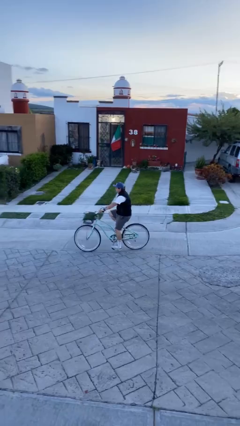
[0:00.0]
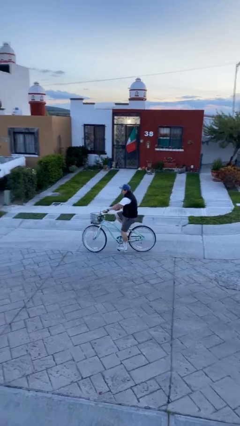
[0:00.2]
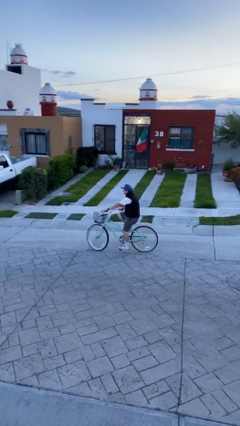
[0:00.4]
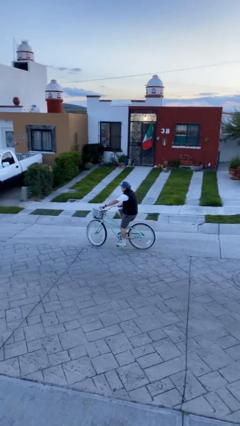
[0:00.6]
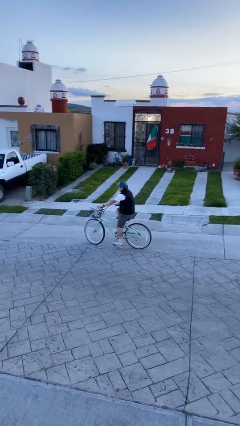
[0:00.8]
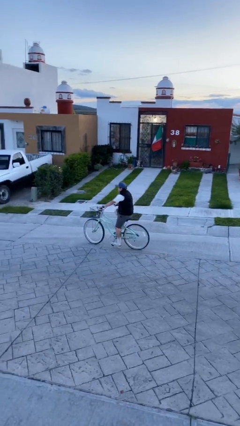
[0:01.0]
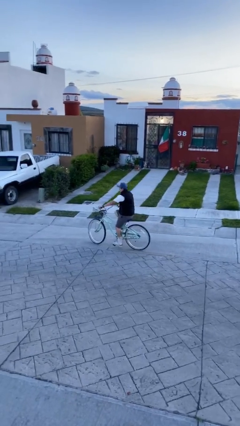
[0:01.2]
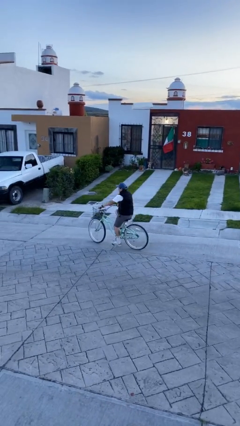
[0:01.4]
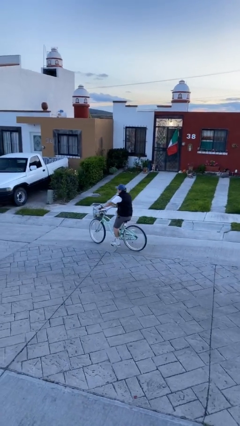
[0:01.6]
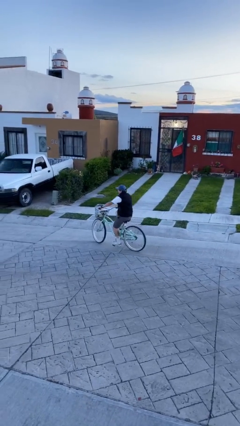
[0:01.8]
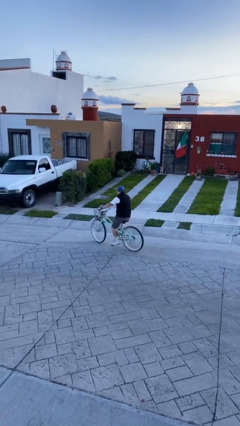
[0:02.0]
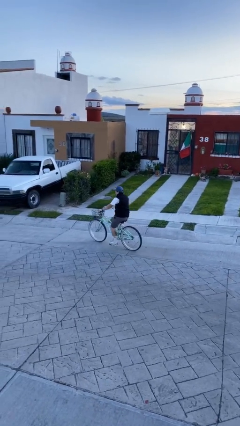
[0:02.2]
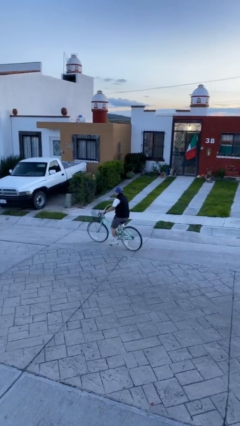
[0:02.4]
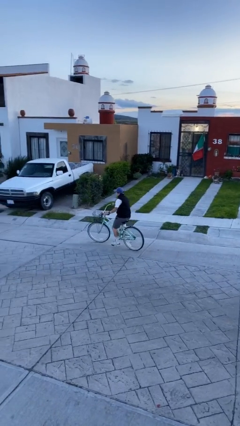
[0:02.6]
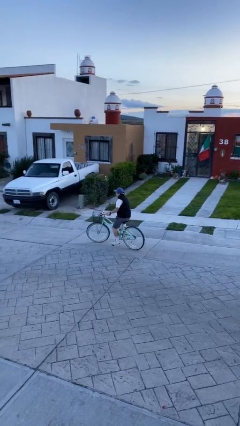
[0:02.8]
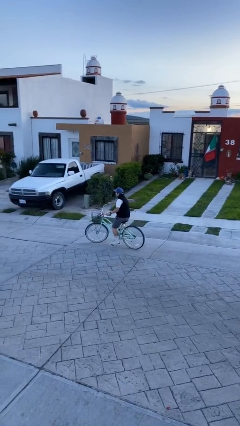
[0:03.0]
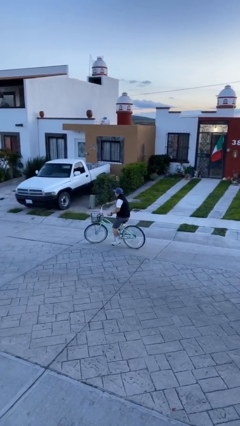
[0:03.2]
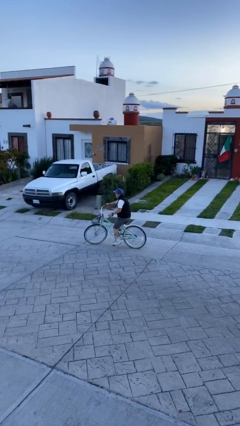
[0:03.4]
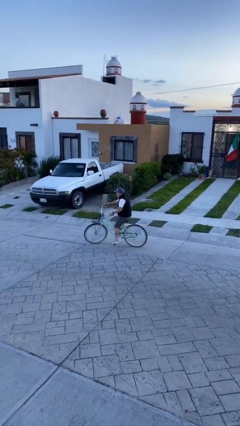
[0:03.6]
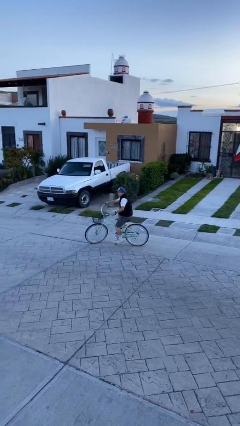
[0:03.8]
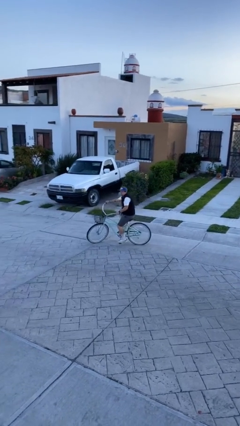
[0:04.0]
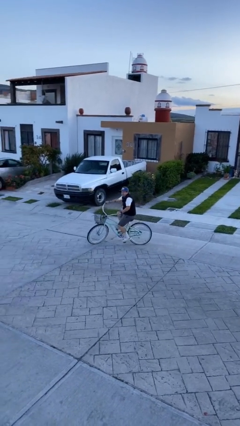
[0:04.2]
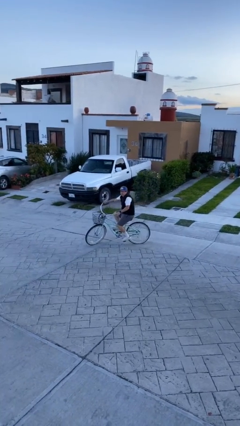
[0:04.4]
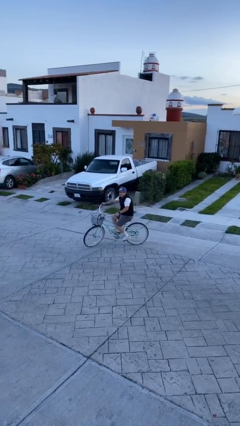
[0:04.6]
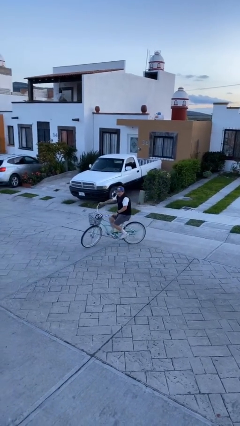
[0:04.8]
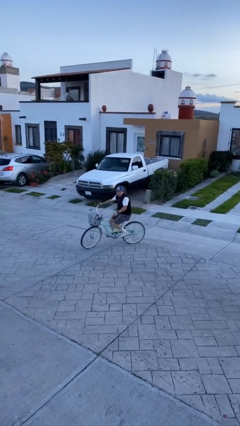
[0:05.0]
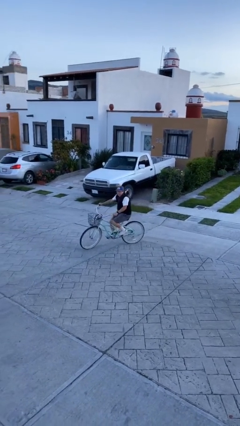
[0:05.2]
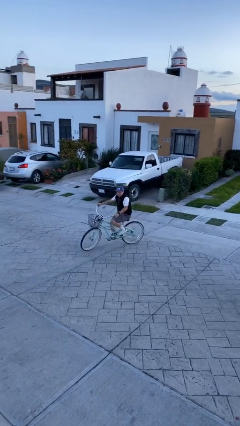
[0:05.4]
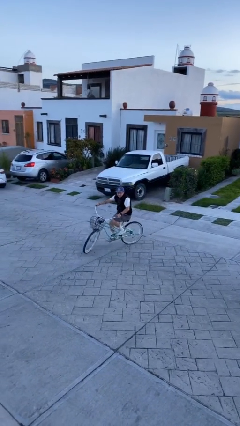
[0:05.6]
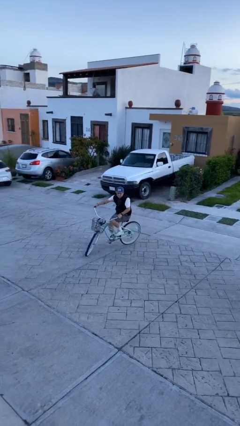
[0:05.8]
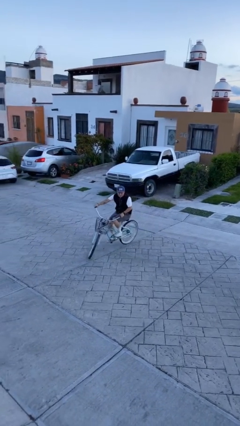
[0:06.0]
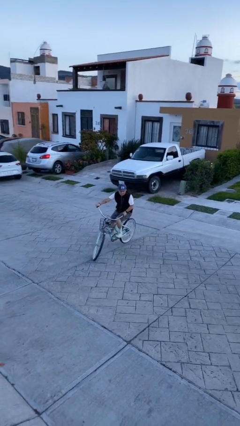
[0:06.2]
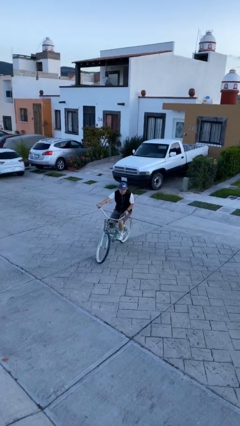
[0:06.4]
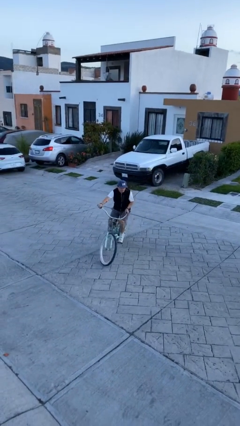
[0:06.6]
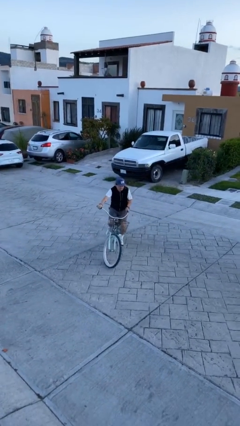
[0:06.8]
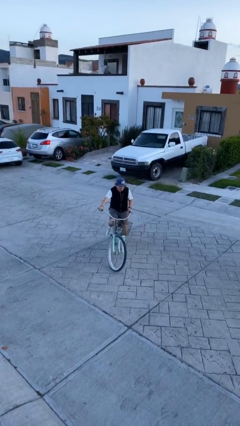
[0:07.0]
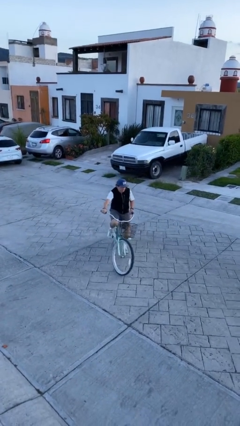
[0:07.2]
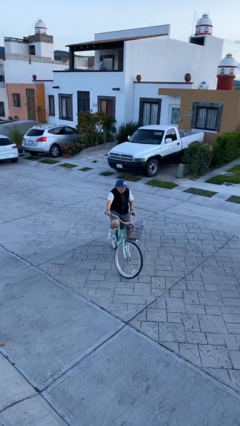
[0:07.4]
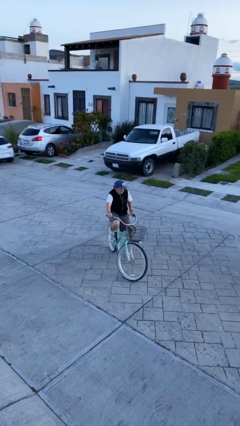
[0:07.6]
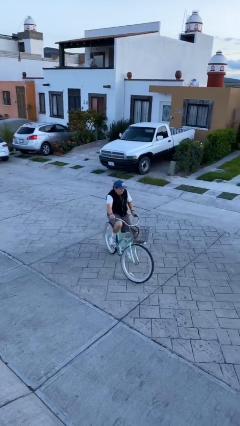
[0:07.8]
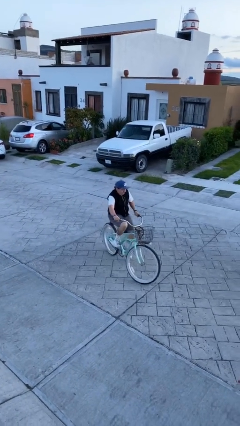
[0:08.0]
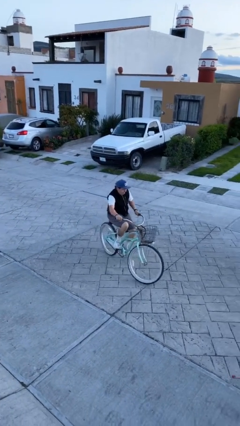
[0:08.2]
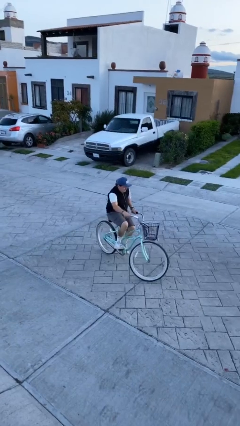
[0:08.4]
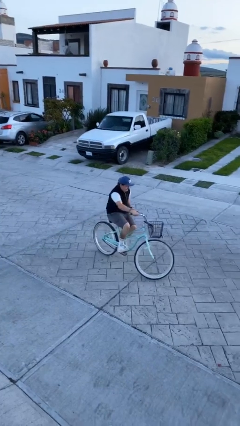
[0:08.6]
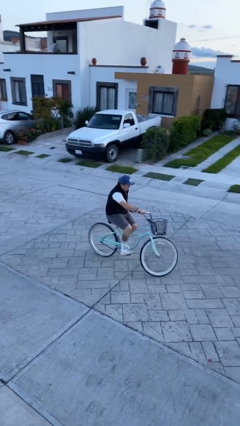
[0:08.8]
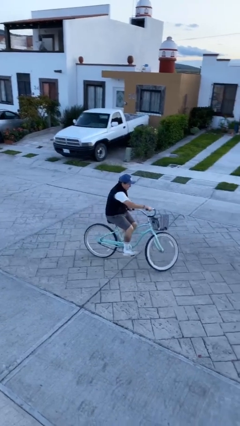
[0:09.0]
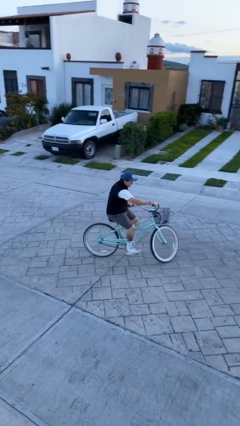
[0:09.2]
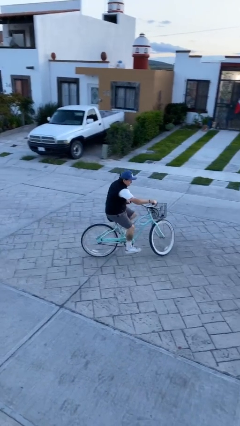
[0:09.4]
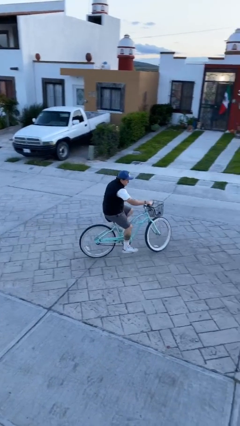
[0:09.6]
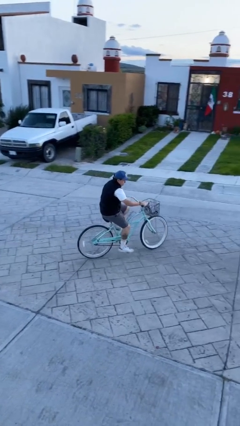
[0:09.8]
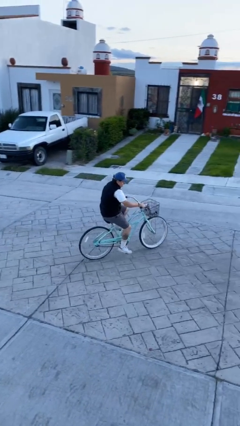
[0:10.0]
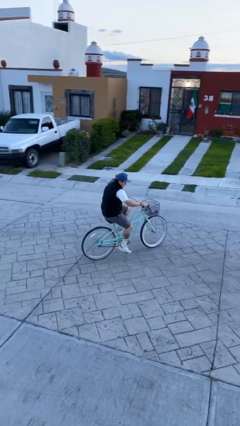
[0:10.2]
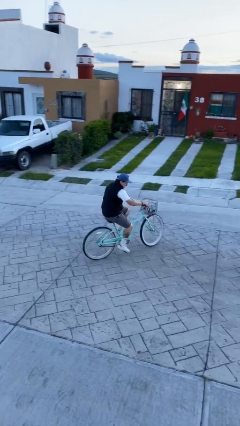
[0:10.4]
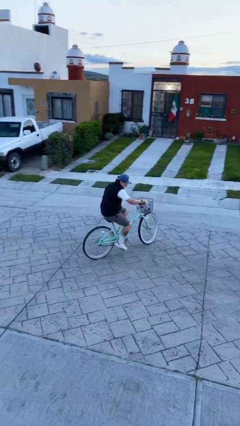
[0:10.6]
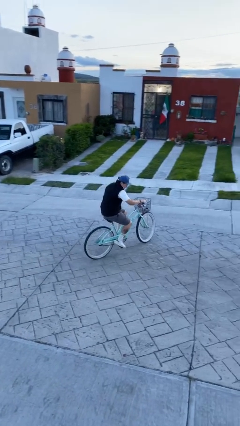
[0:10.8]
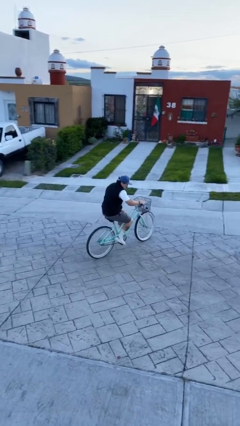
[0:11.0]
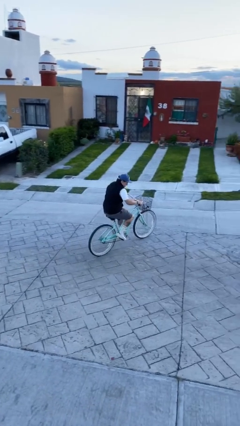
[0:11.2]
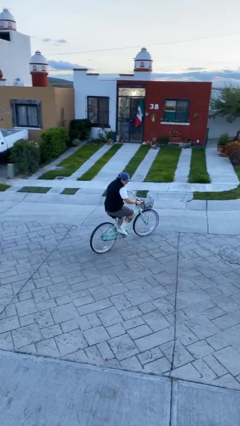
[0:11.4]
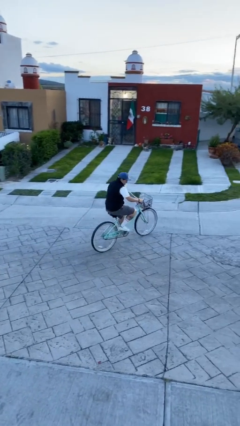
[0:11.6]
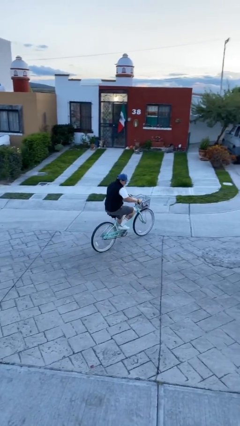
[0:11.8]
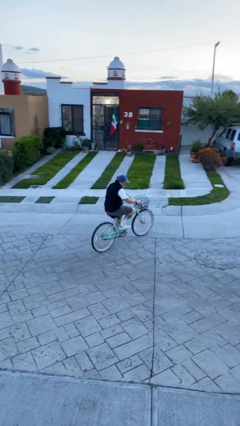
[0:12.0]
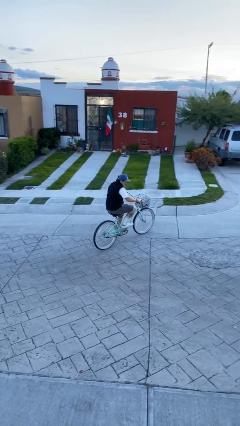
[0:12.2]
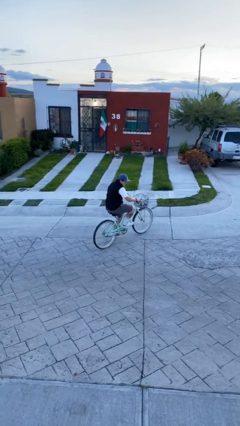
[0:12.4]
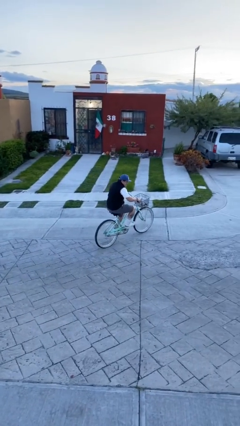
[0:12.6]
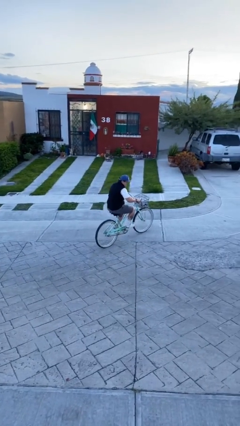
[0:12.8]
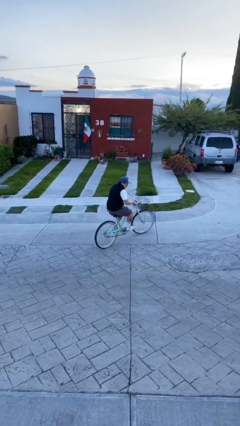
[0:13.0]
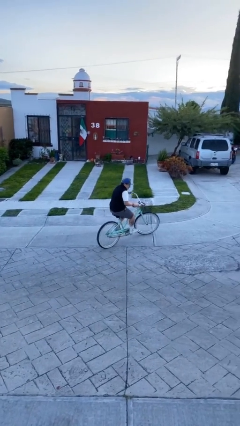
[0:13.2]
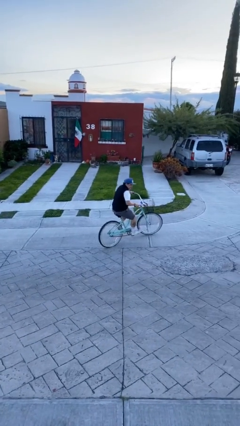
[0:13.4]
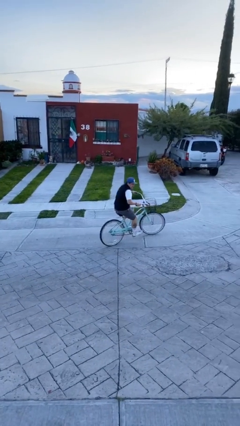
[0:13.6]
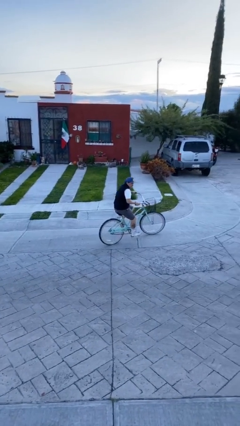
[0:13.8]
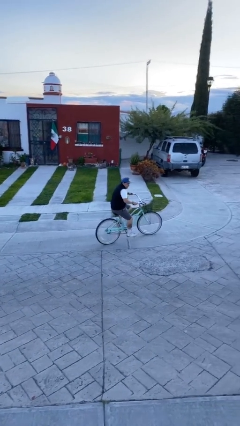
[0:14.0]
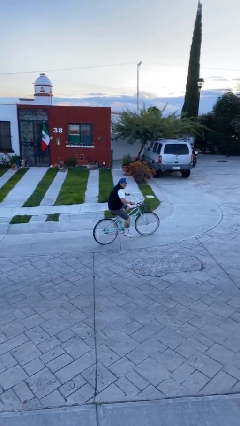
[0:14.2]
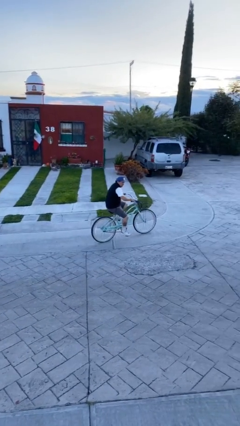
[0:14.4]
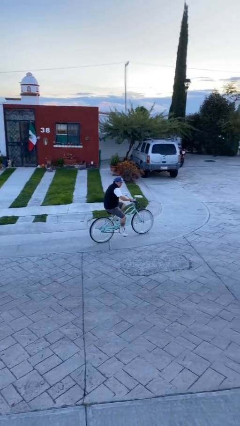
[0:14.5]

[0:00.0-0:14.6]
person rides bicycle

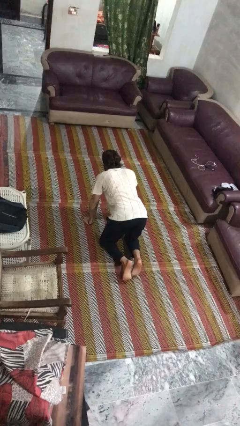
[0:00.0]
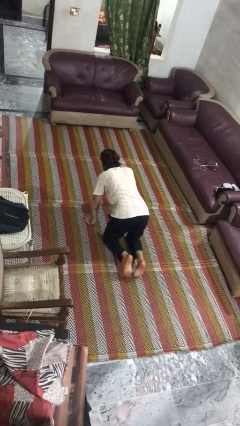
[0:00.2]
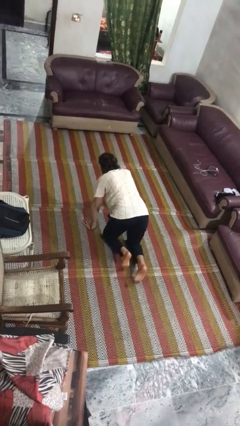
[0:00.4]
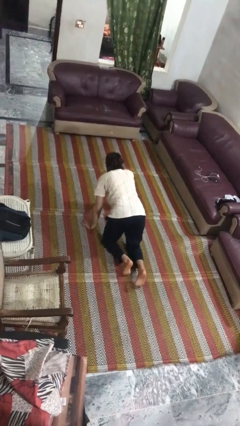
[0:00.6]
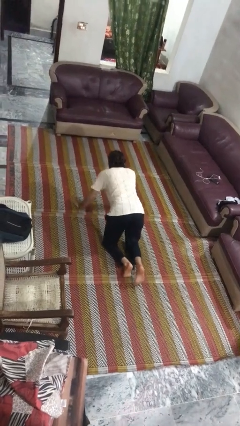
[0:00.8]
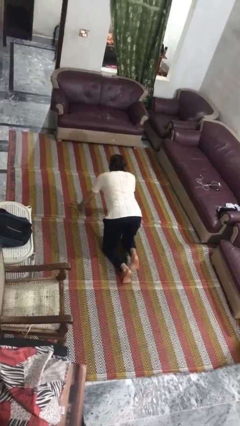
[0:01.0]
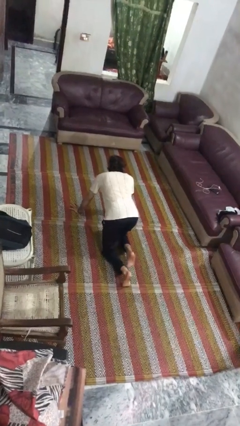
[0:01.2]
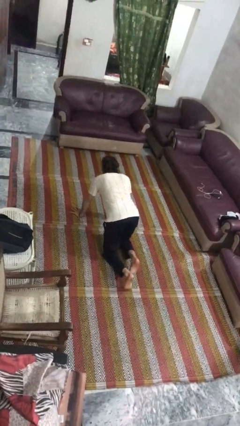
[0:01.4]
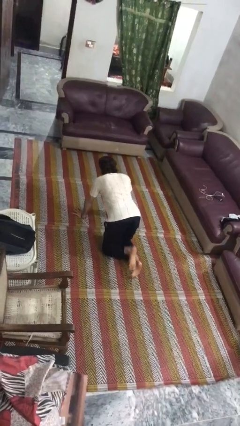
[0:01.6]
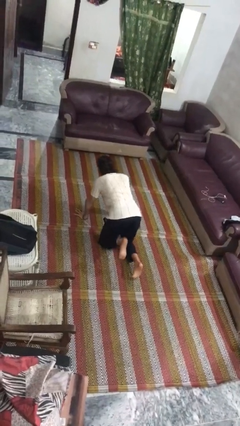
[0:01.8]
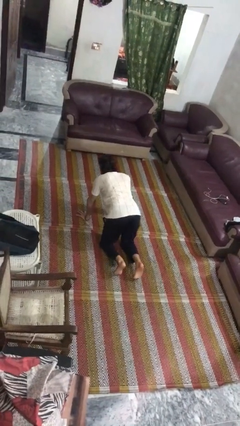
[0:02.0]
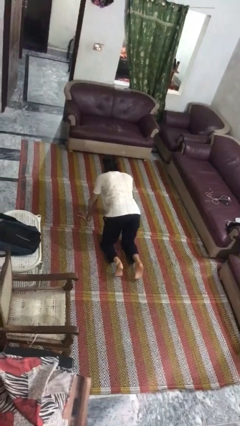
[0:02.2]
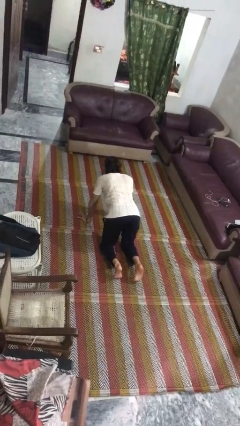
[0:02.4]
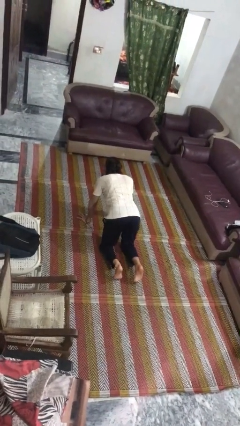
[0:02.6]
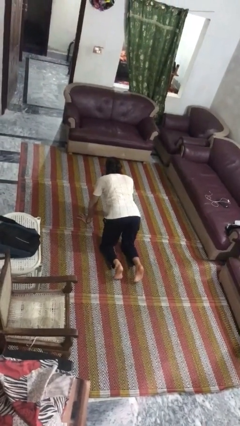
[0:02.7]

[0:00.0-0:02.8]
person crawls

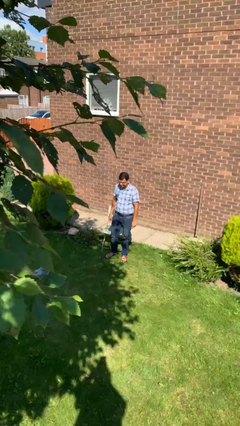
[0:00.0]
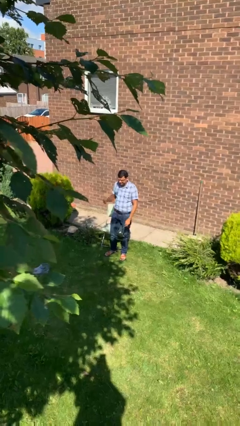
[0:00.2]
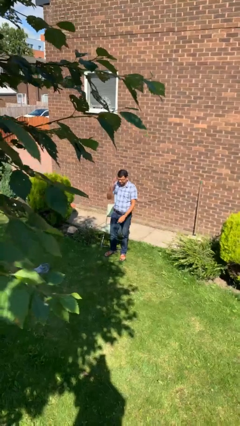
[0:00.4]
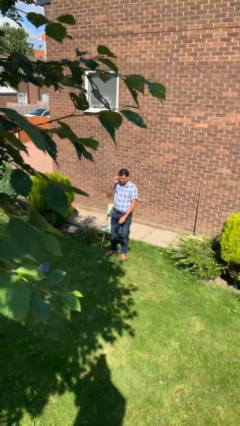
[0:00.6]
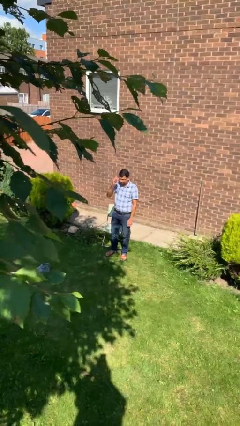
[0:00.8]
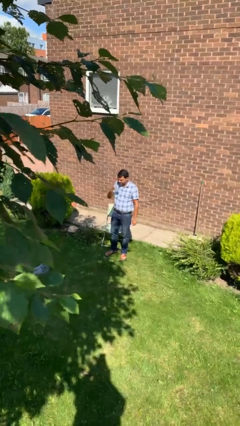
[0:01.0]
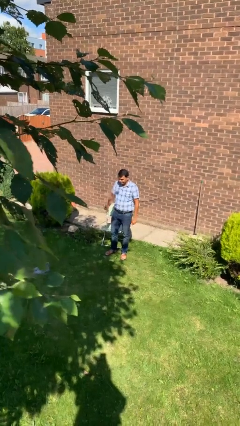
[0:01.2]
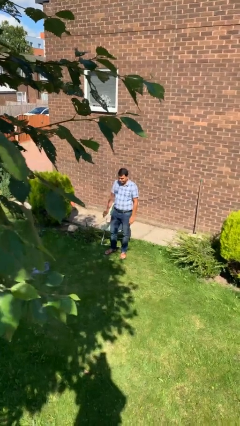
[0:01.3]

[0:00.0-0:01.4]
person takes off glasses
